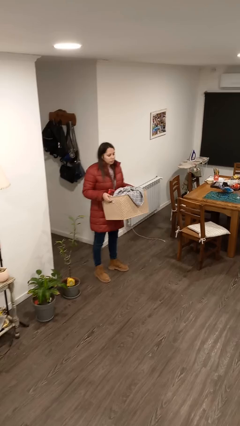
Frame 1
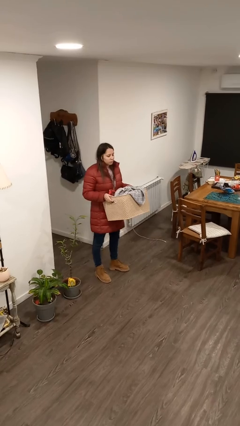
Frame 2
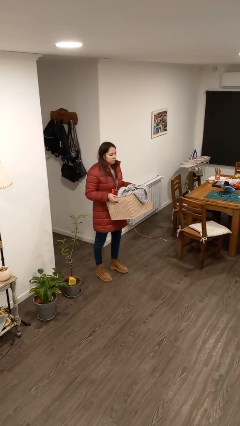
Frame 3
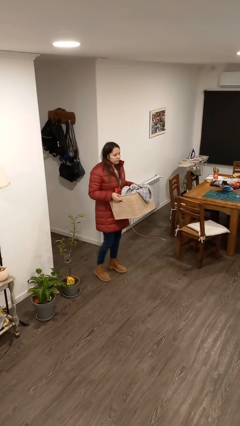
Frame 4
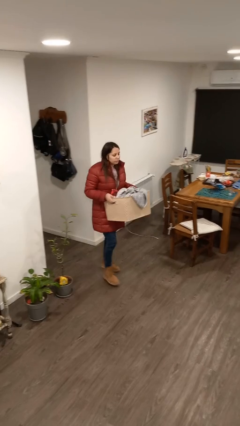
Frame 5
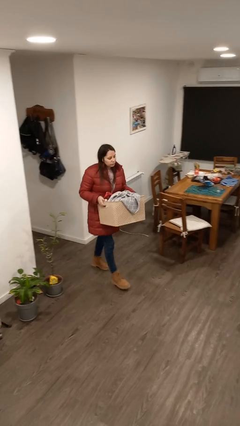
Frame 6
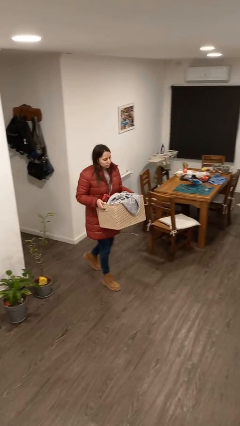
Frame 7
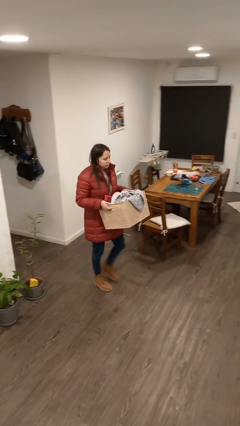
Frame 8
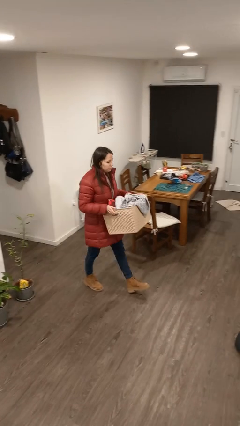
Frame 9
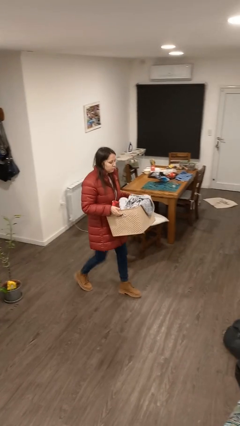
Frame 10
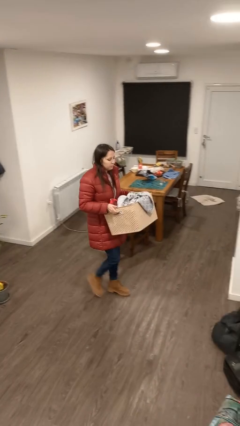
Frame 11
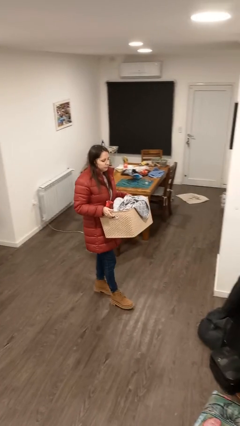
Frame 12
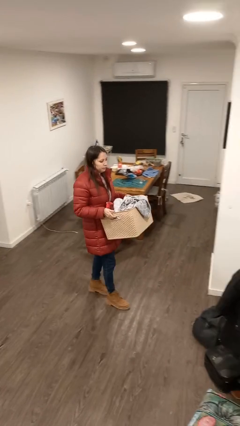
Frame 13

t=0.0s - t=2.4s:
person carries laundry basket

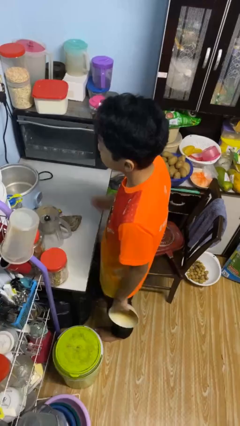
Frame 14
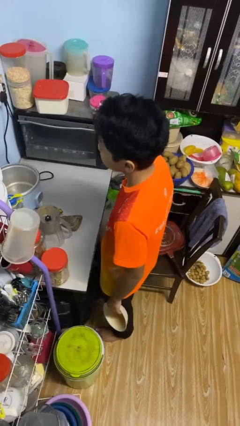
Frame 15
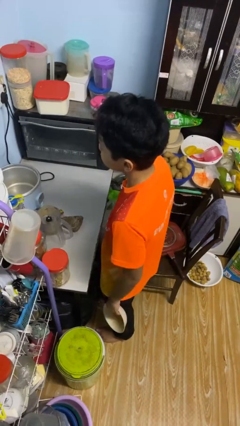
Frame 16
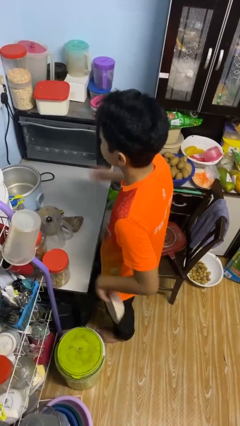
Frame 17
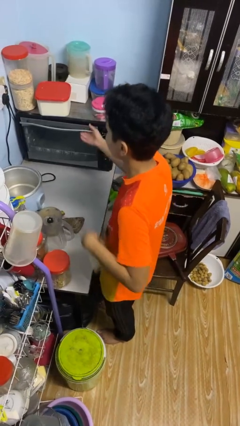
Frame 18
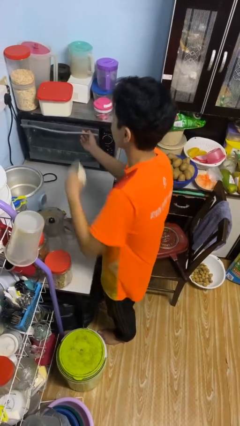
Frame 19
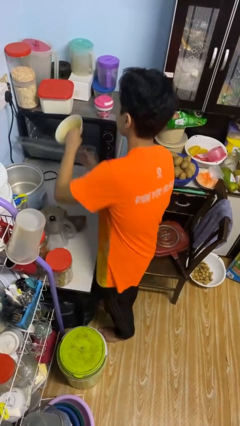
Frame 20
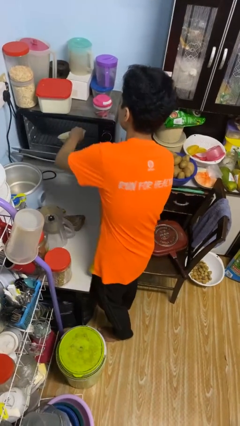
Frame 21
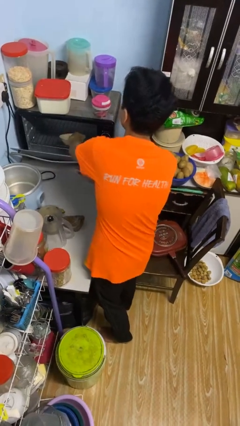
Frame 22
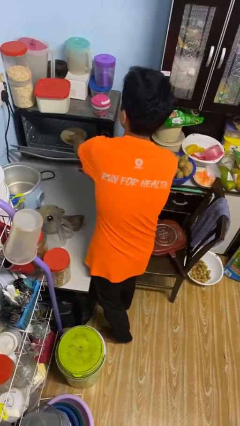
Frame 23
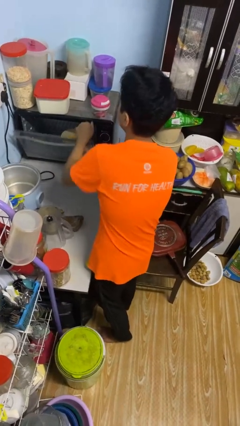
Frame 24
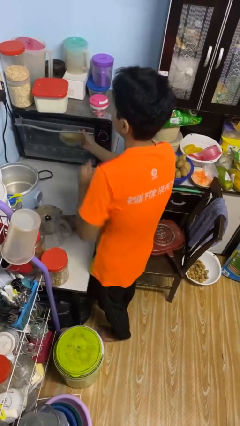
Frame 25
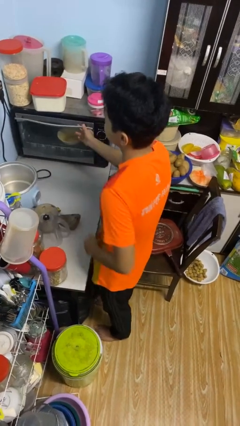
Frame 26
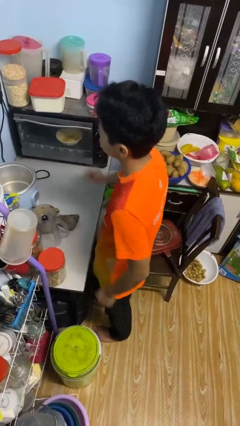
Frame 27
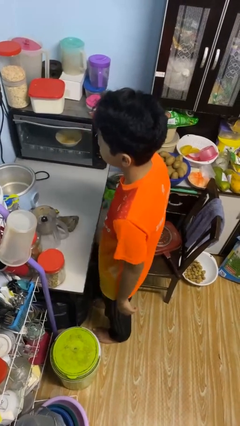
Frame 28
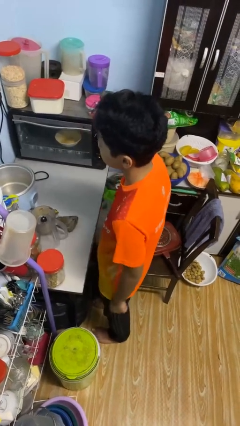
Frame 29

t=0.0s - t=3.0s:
person puts object into oven

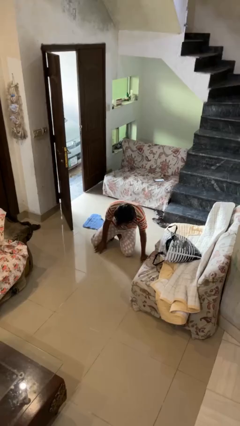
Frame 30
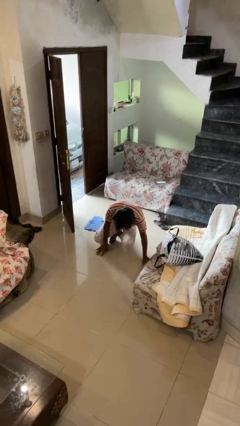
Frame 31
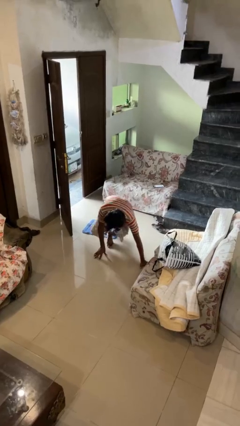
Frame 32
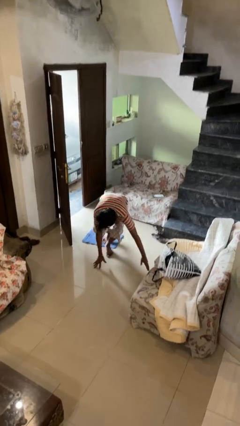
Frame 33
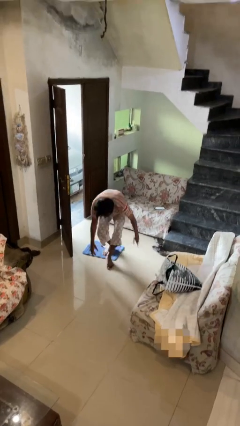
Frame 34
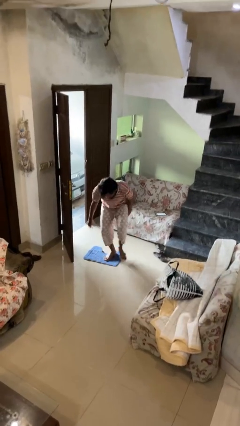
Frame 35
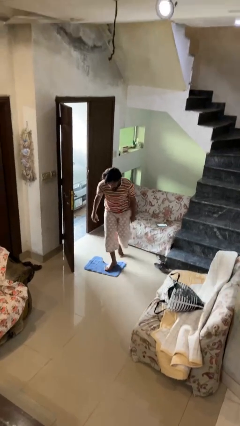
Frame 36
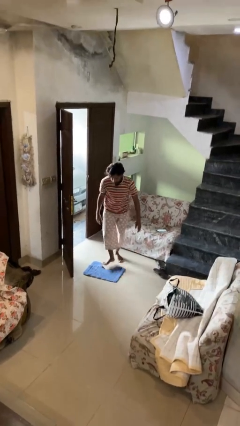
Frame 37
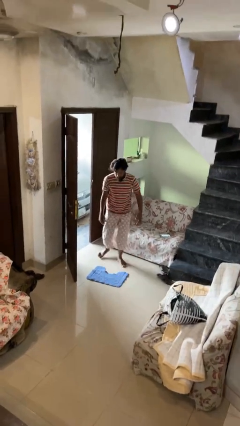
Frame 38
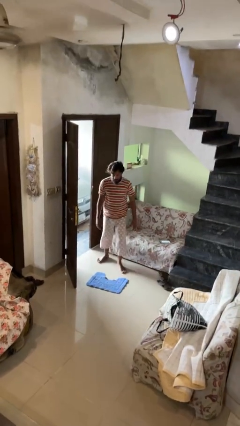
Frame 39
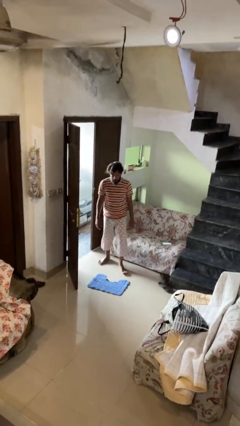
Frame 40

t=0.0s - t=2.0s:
person stands up from floor

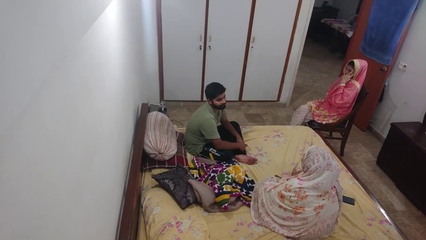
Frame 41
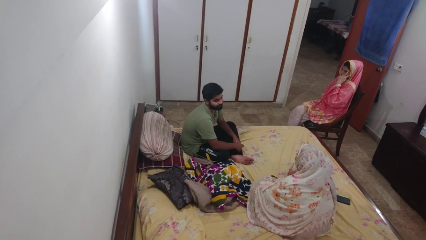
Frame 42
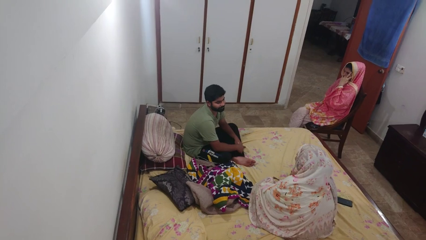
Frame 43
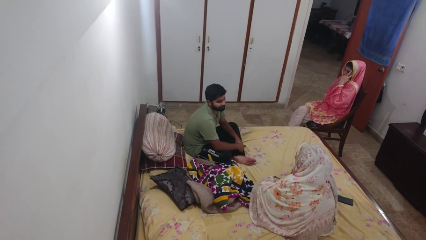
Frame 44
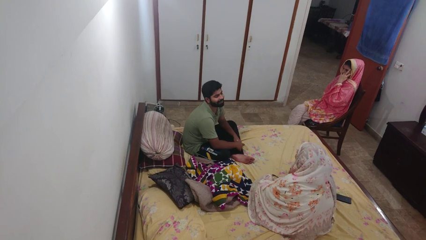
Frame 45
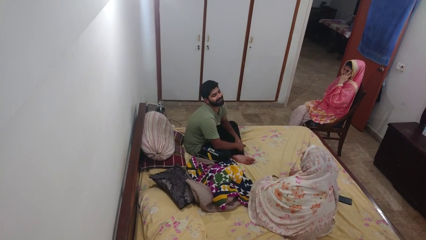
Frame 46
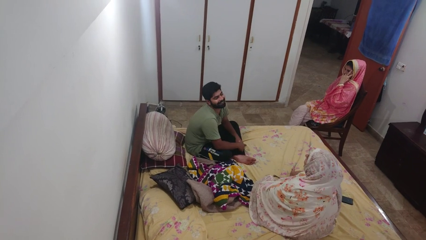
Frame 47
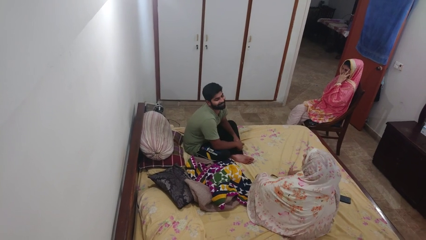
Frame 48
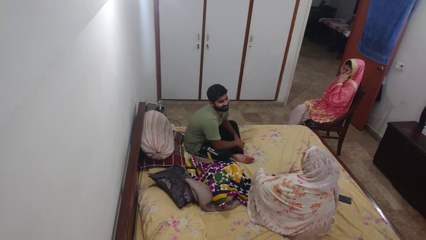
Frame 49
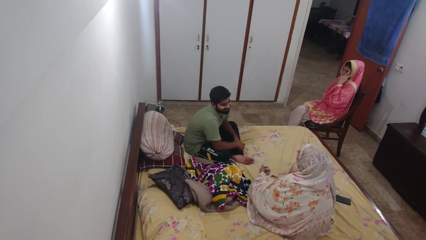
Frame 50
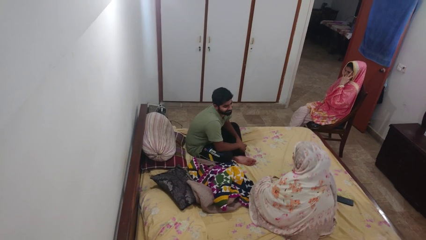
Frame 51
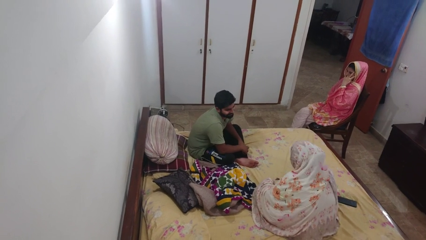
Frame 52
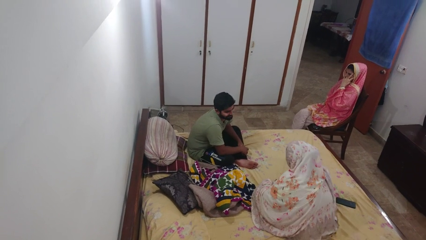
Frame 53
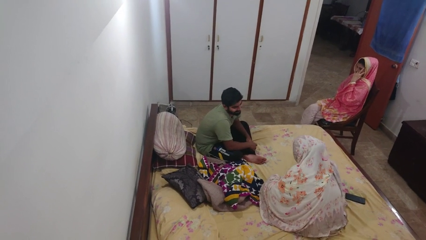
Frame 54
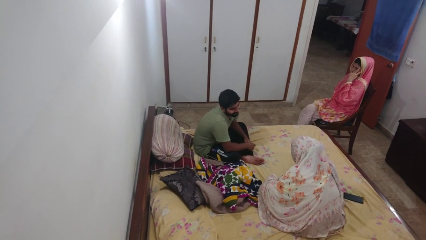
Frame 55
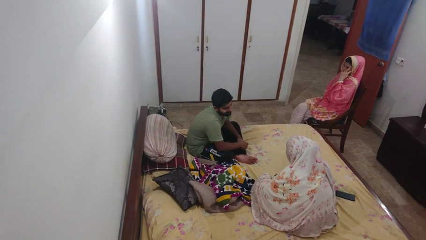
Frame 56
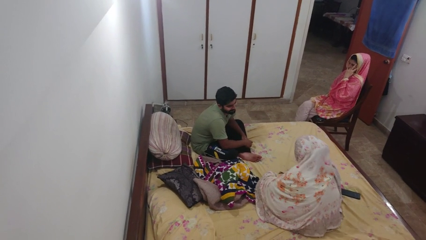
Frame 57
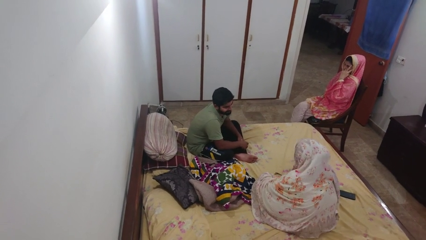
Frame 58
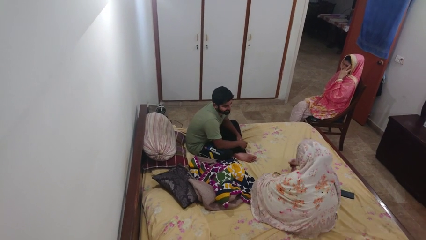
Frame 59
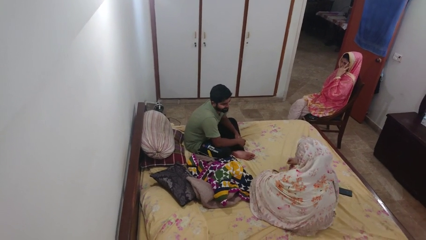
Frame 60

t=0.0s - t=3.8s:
person laughs with person

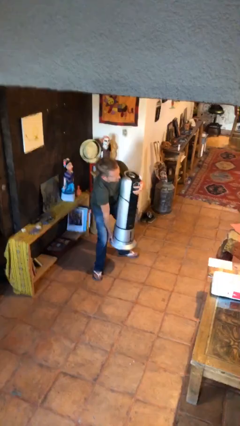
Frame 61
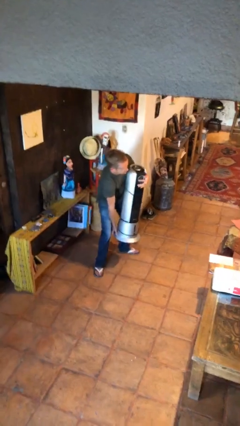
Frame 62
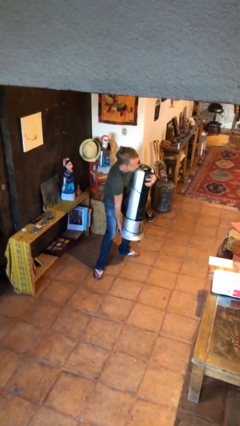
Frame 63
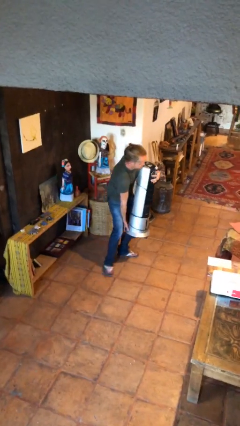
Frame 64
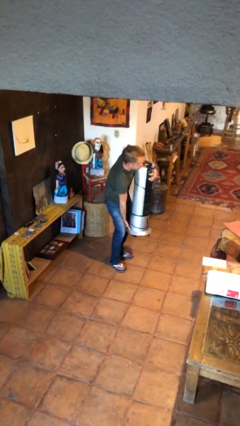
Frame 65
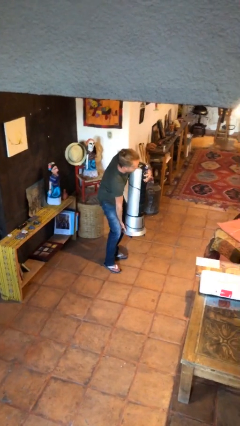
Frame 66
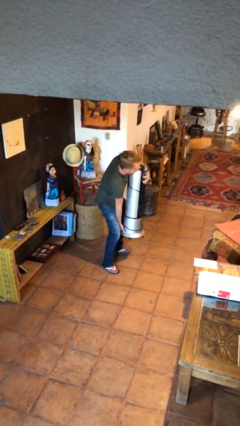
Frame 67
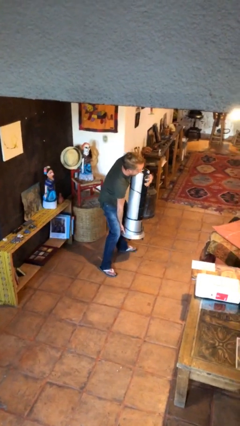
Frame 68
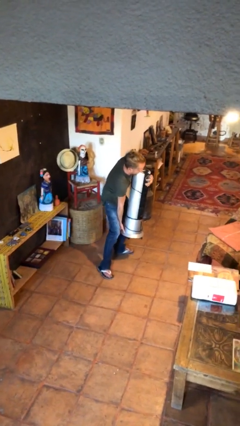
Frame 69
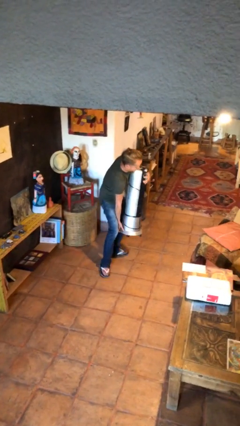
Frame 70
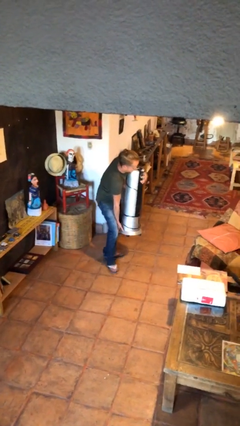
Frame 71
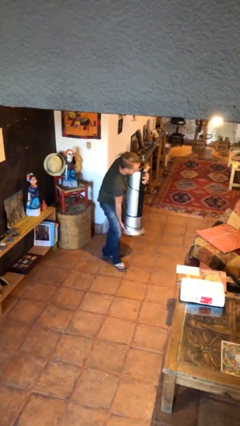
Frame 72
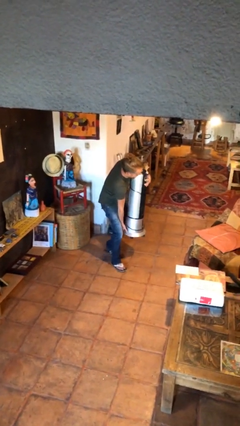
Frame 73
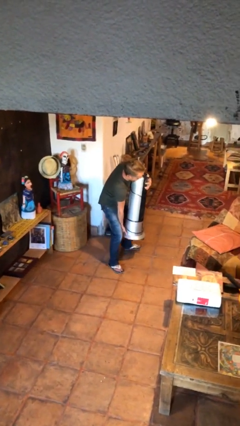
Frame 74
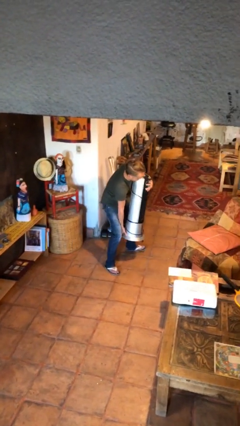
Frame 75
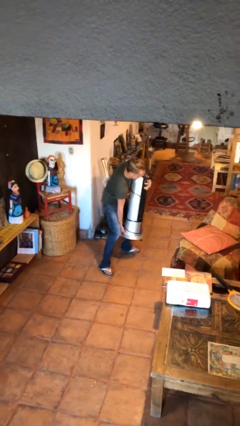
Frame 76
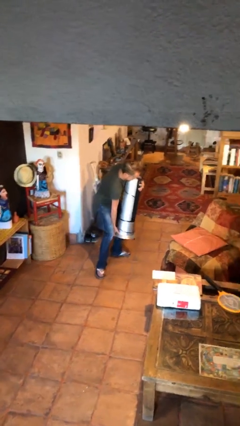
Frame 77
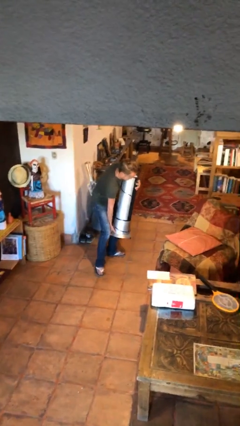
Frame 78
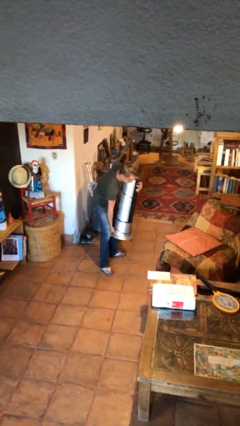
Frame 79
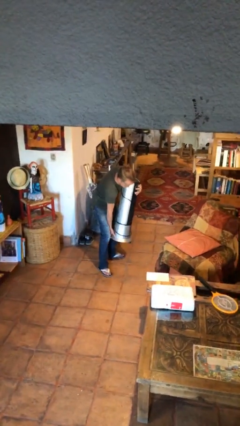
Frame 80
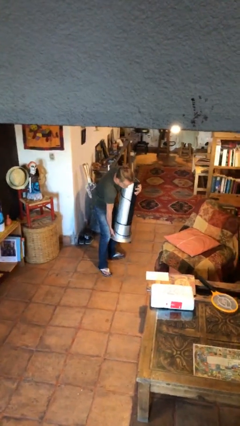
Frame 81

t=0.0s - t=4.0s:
person carries heavy object

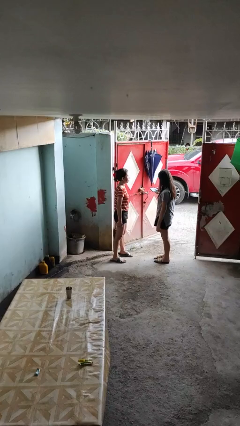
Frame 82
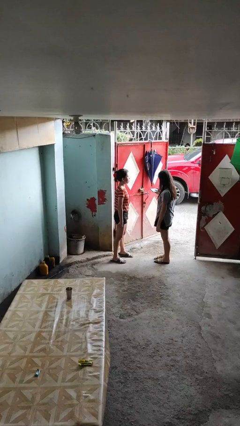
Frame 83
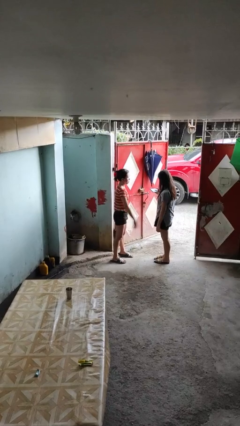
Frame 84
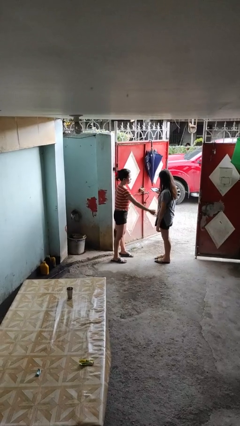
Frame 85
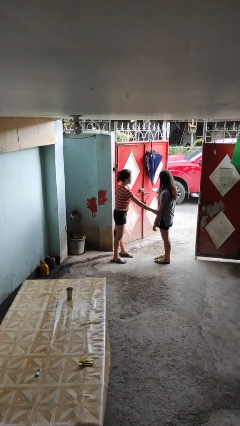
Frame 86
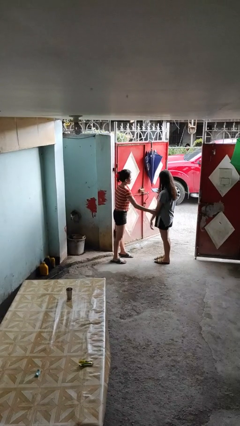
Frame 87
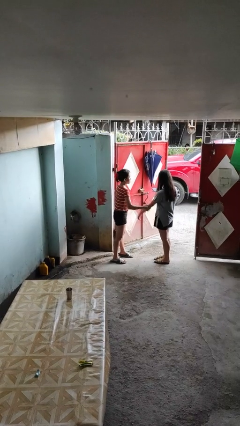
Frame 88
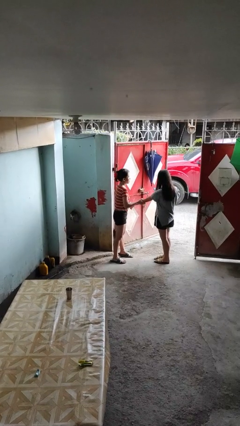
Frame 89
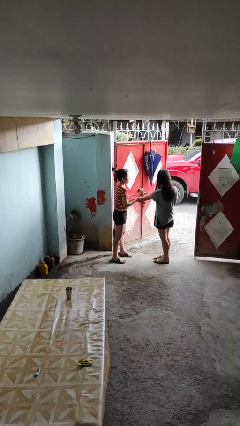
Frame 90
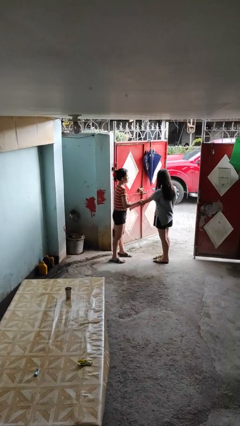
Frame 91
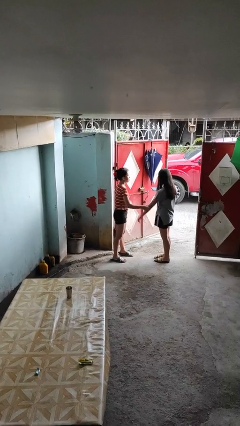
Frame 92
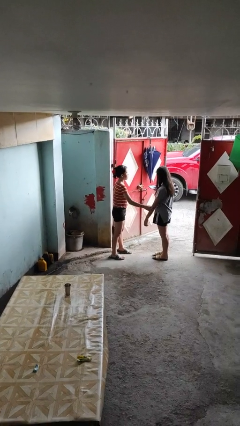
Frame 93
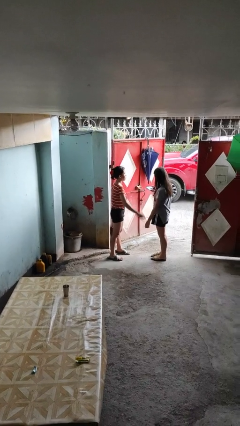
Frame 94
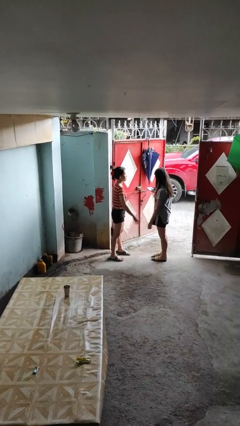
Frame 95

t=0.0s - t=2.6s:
person grabs person by forearm
